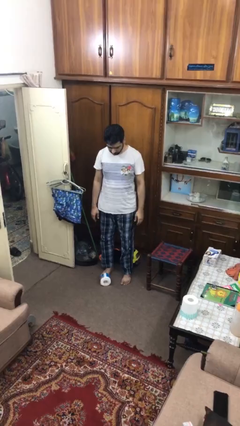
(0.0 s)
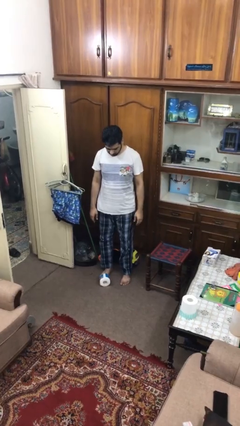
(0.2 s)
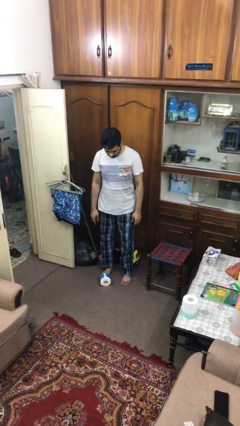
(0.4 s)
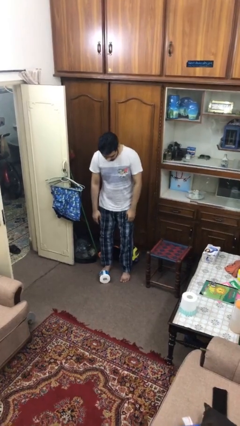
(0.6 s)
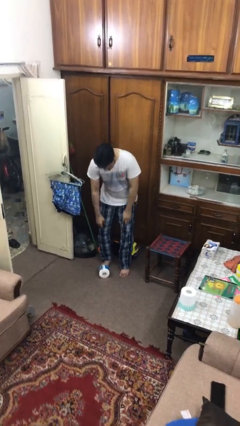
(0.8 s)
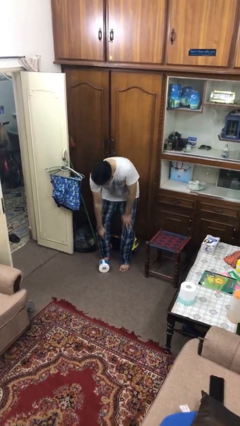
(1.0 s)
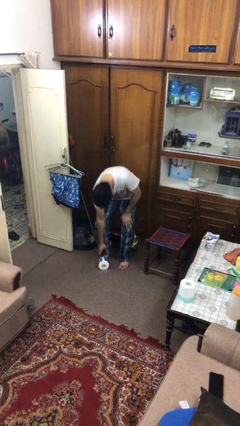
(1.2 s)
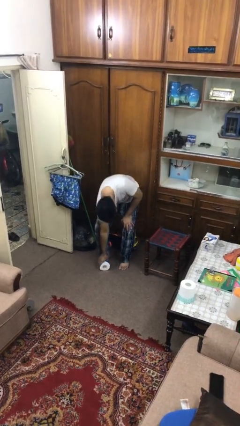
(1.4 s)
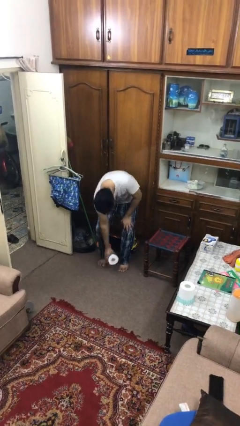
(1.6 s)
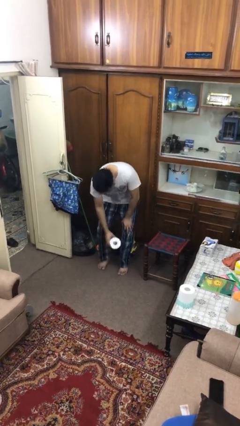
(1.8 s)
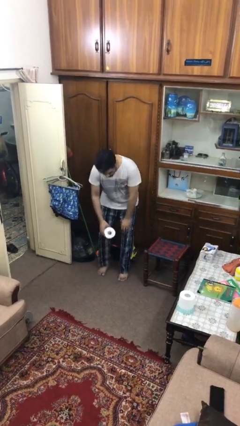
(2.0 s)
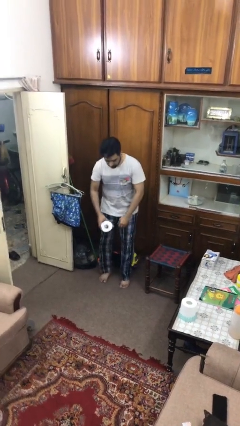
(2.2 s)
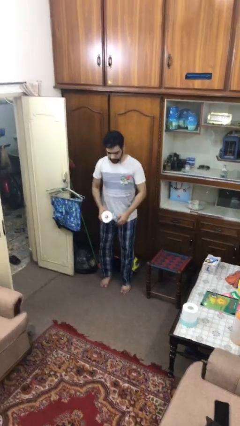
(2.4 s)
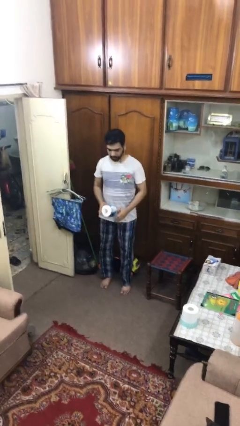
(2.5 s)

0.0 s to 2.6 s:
person picks up object from floor

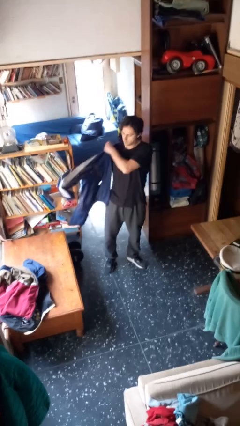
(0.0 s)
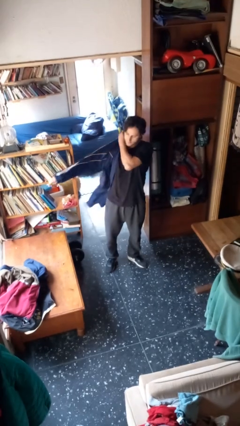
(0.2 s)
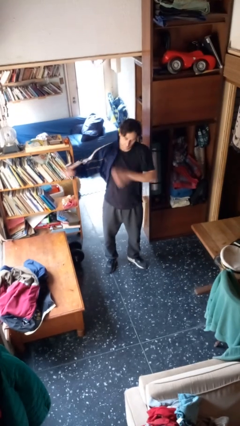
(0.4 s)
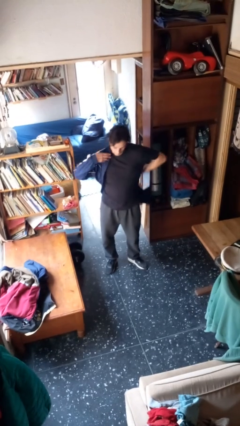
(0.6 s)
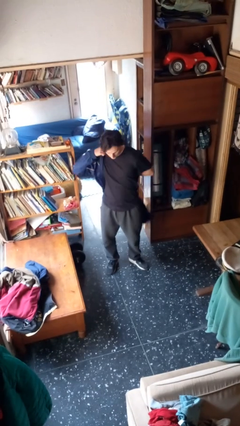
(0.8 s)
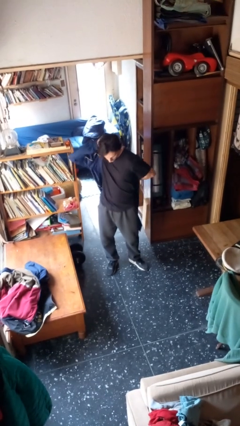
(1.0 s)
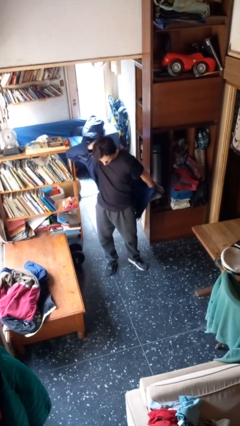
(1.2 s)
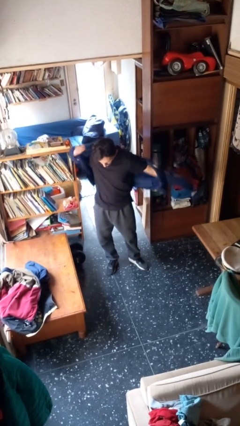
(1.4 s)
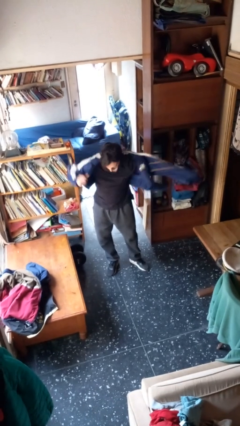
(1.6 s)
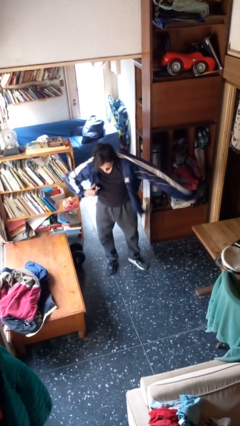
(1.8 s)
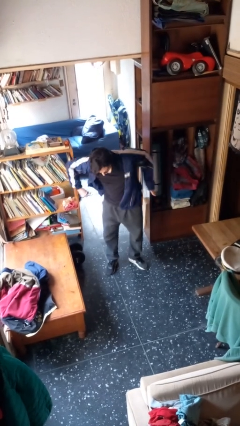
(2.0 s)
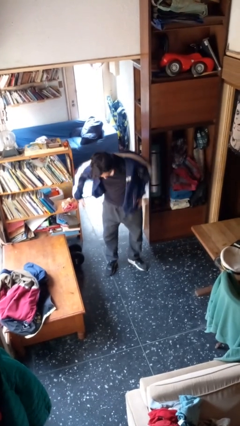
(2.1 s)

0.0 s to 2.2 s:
person puts on jacket

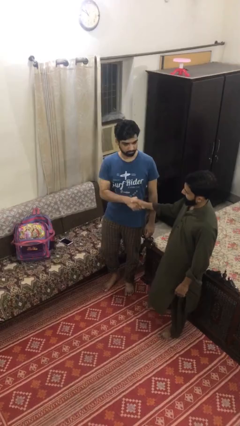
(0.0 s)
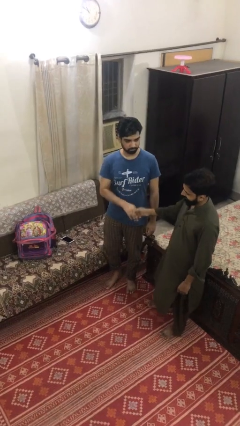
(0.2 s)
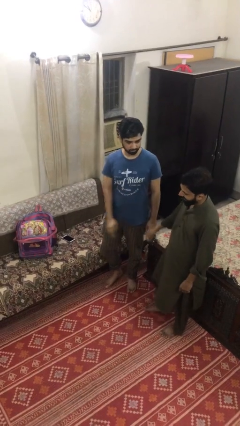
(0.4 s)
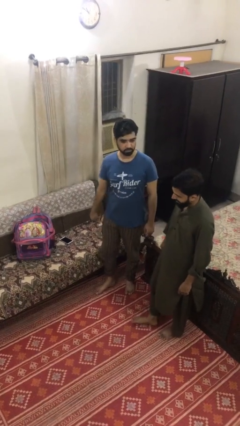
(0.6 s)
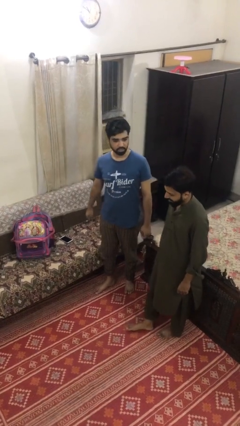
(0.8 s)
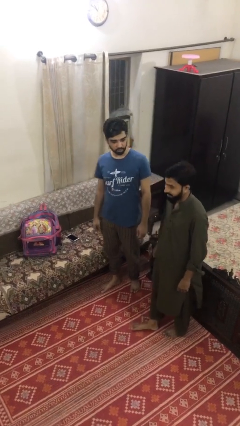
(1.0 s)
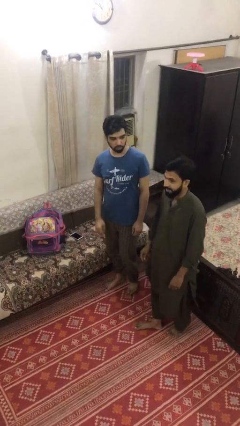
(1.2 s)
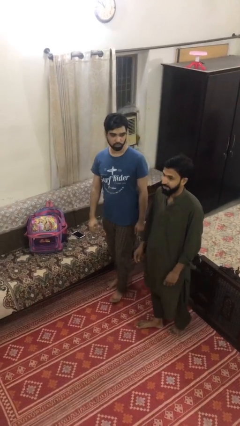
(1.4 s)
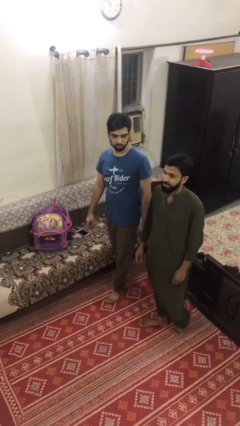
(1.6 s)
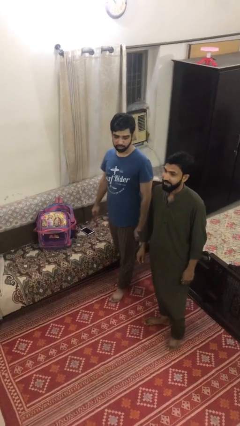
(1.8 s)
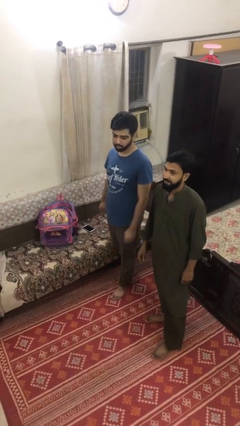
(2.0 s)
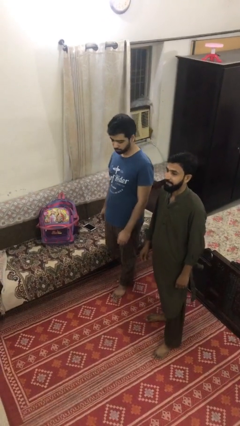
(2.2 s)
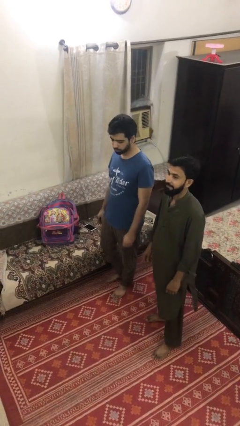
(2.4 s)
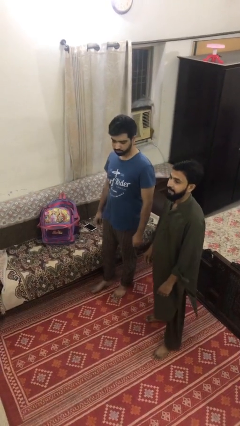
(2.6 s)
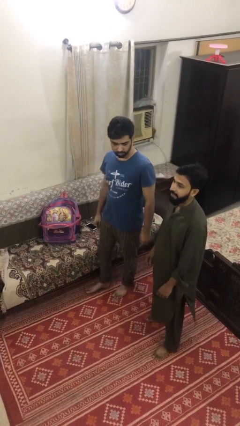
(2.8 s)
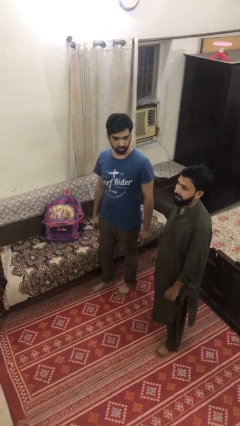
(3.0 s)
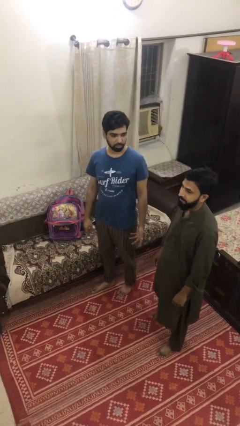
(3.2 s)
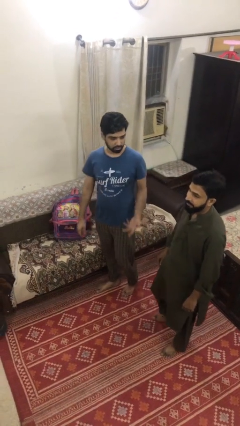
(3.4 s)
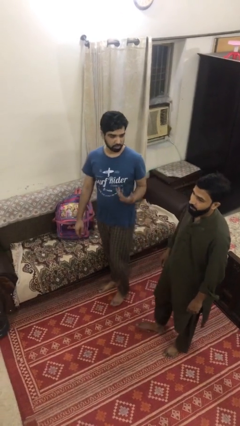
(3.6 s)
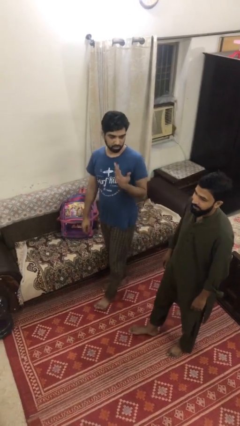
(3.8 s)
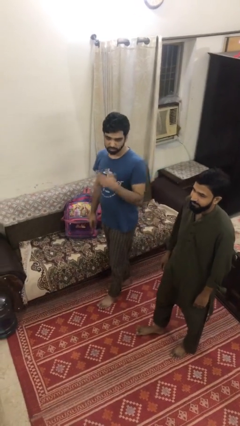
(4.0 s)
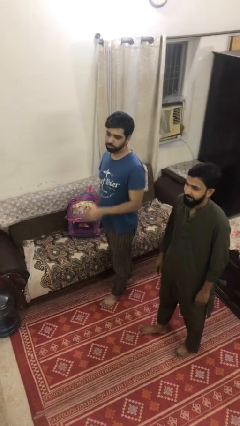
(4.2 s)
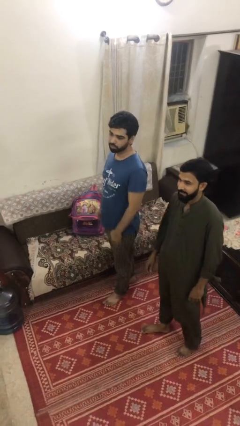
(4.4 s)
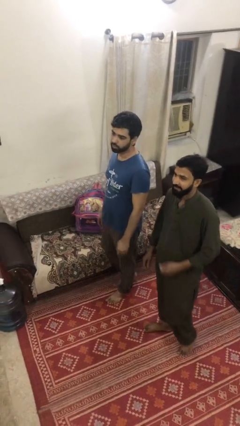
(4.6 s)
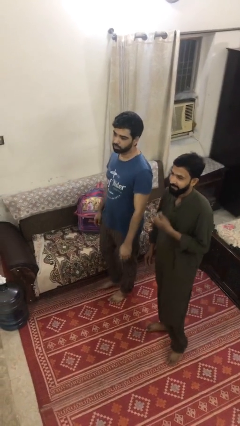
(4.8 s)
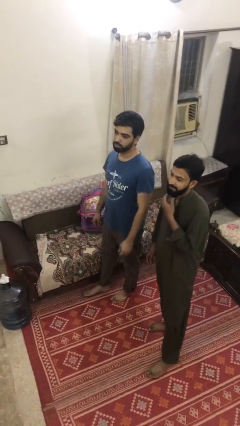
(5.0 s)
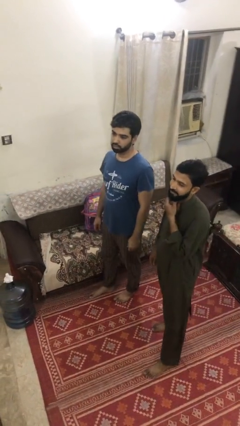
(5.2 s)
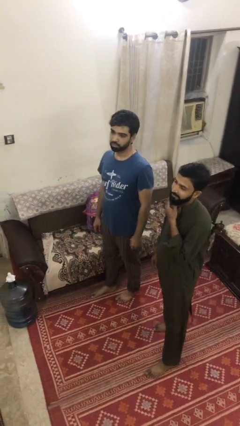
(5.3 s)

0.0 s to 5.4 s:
person talks to person

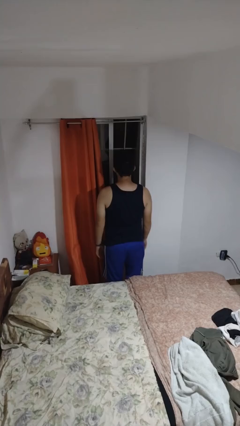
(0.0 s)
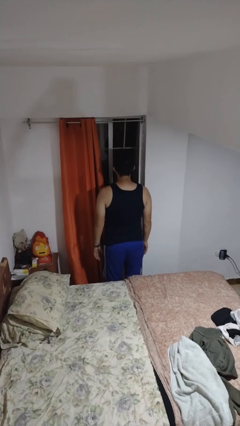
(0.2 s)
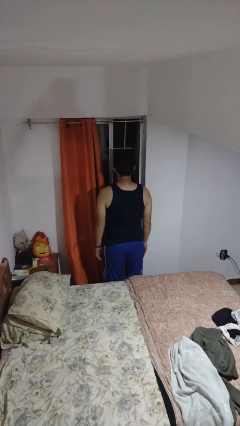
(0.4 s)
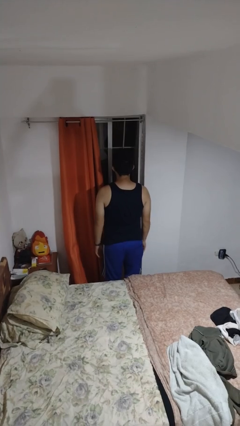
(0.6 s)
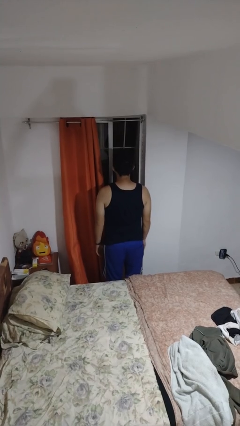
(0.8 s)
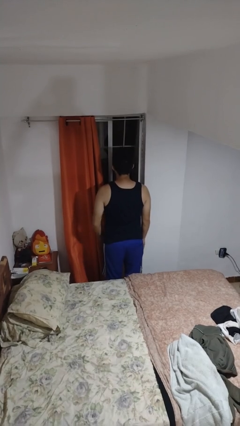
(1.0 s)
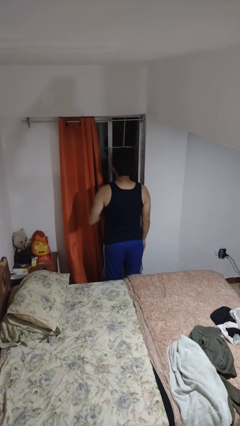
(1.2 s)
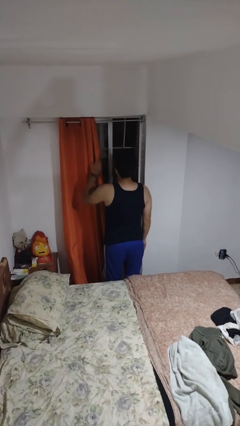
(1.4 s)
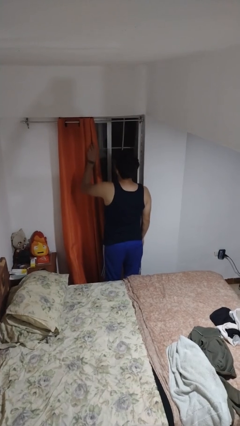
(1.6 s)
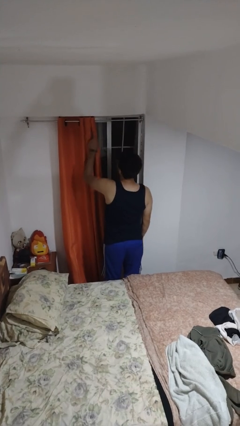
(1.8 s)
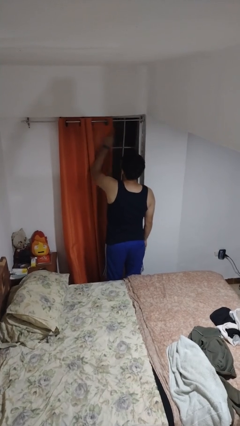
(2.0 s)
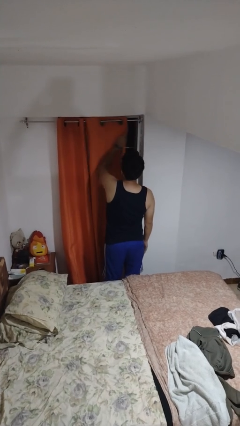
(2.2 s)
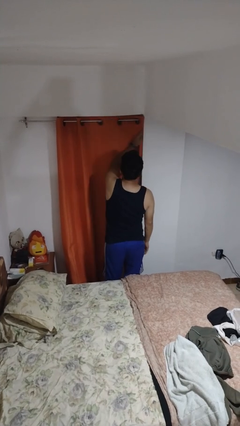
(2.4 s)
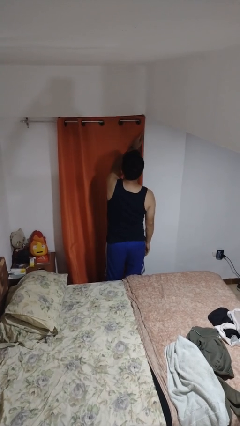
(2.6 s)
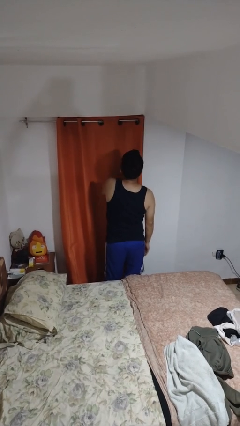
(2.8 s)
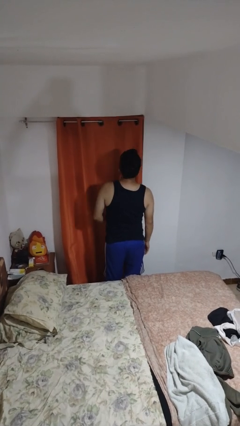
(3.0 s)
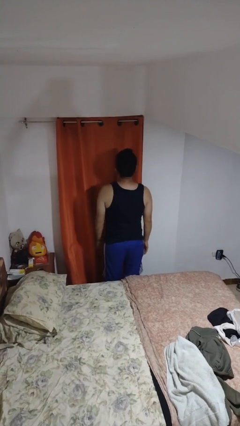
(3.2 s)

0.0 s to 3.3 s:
person closes curtains

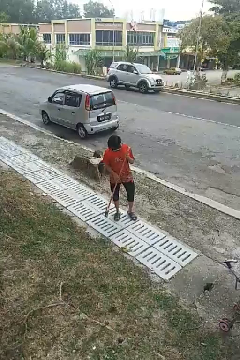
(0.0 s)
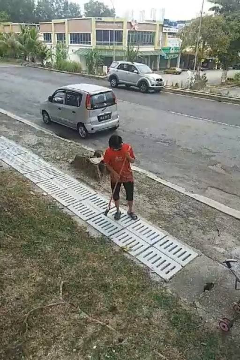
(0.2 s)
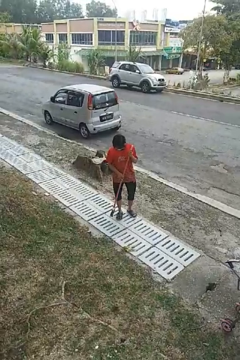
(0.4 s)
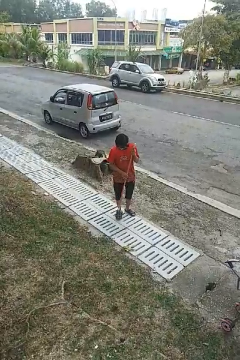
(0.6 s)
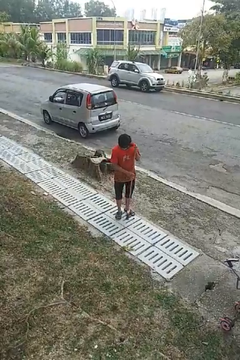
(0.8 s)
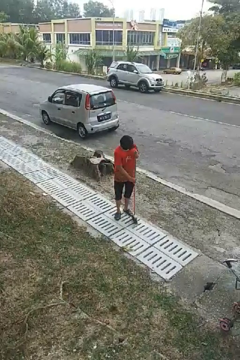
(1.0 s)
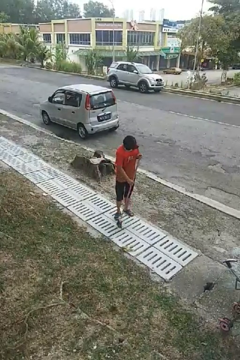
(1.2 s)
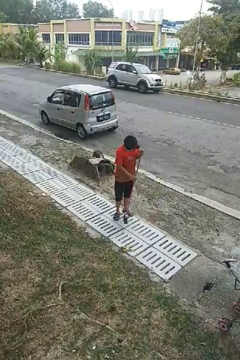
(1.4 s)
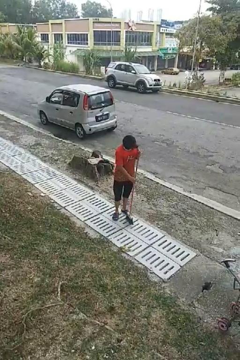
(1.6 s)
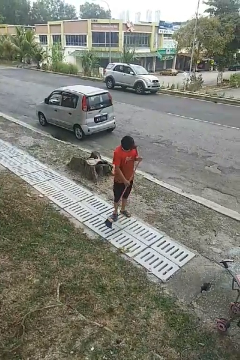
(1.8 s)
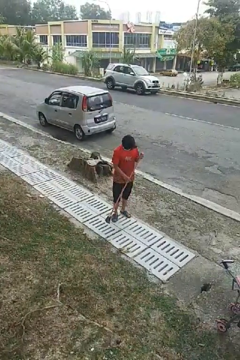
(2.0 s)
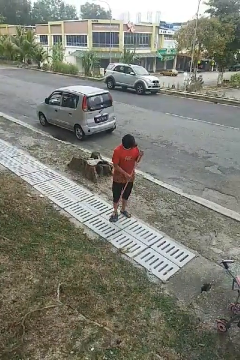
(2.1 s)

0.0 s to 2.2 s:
person sweeps floor

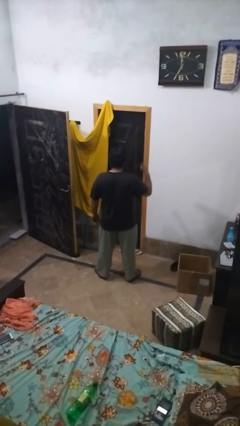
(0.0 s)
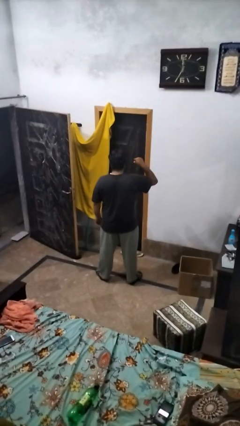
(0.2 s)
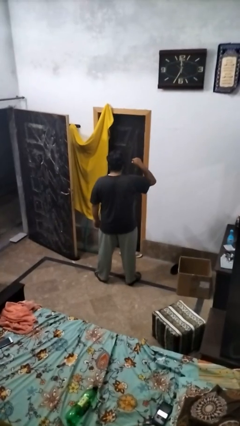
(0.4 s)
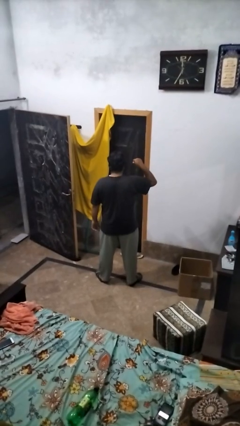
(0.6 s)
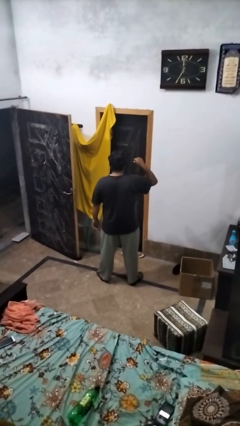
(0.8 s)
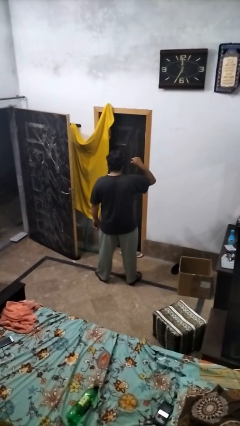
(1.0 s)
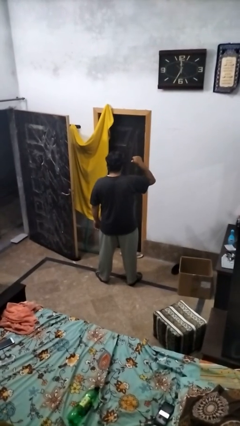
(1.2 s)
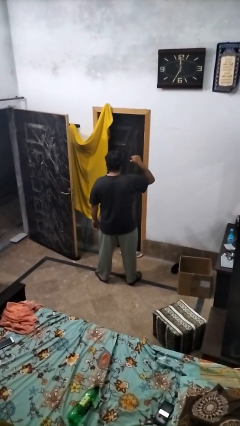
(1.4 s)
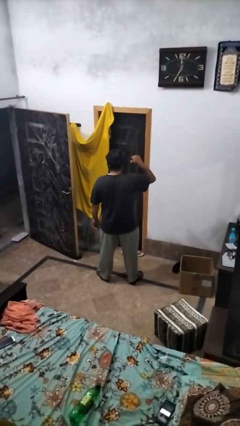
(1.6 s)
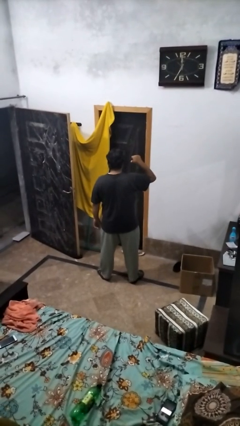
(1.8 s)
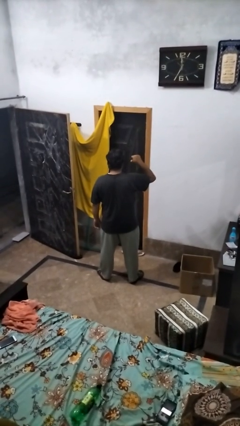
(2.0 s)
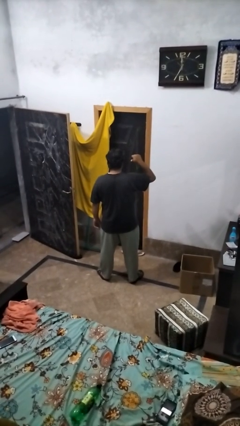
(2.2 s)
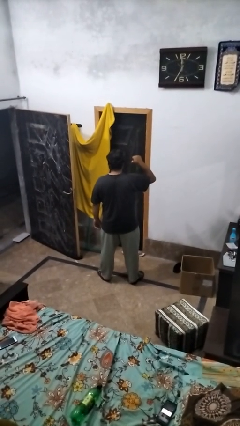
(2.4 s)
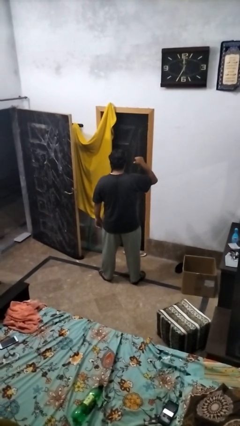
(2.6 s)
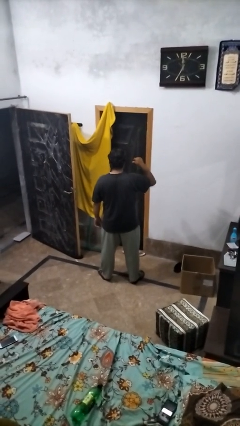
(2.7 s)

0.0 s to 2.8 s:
person gestures behind me
